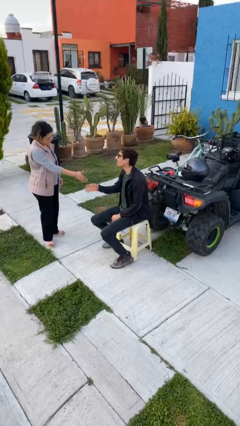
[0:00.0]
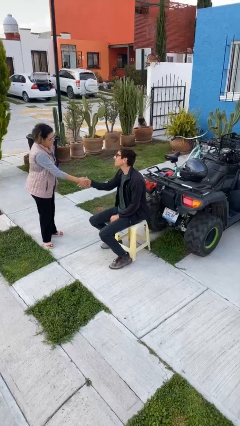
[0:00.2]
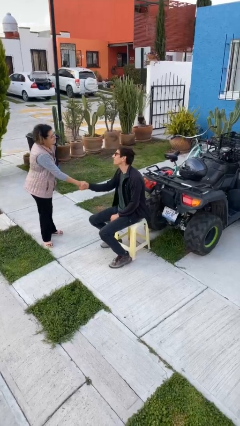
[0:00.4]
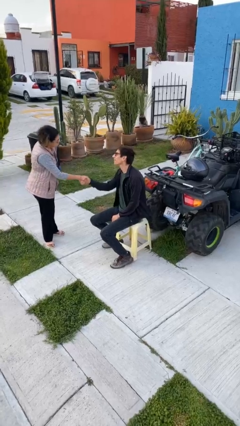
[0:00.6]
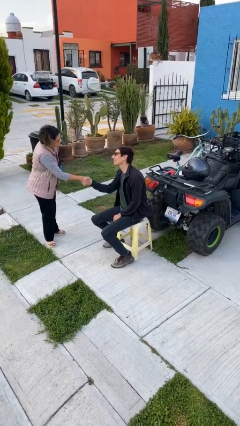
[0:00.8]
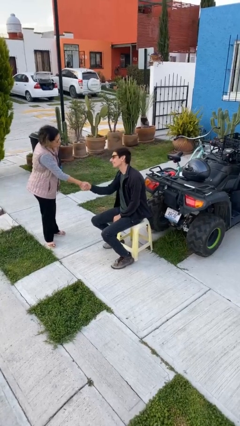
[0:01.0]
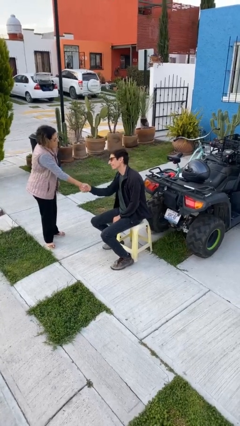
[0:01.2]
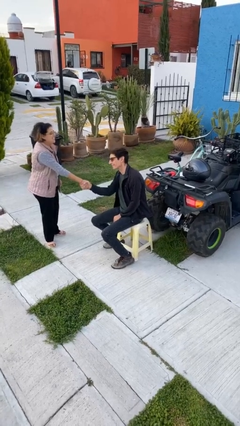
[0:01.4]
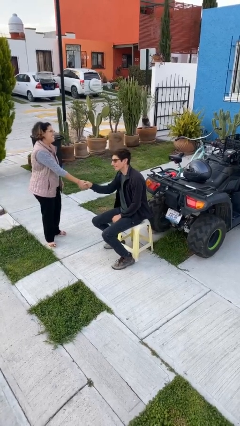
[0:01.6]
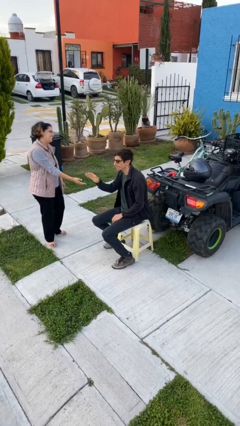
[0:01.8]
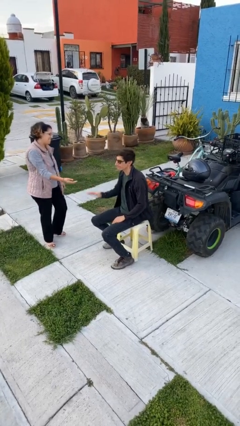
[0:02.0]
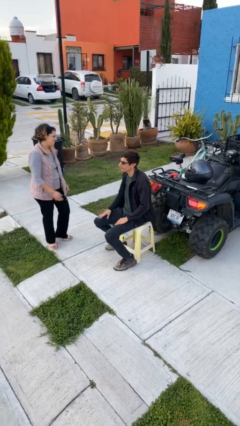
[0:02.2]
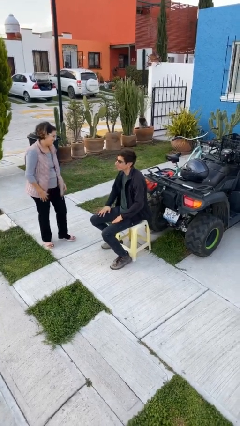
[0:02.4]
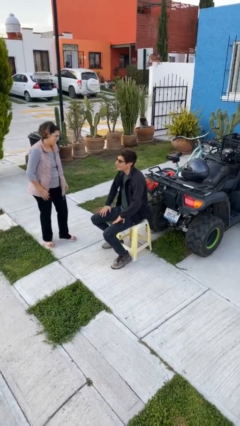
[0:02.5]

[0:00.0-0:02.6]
person shakes hand

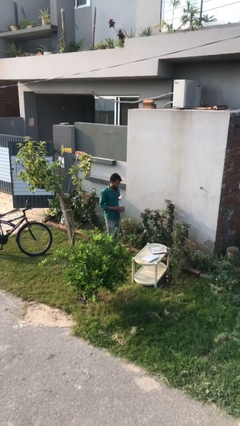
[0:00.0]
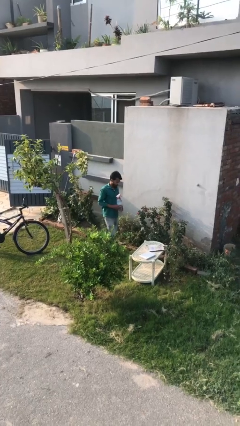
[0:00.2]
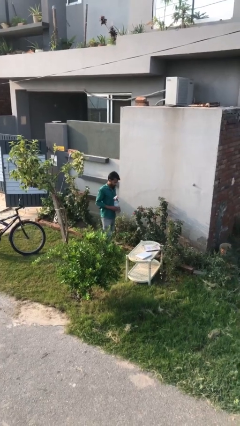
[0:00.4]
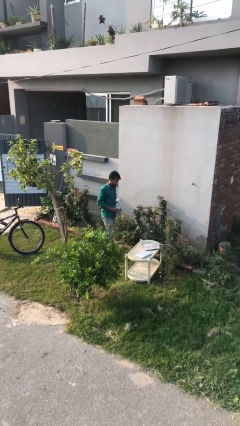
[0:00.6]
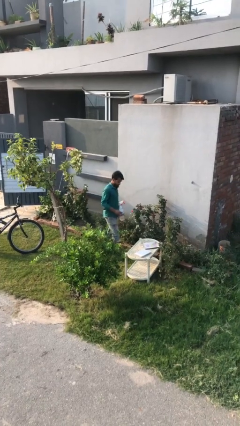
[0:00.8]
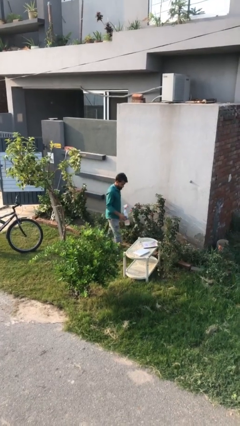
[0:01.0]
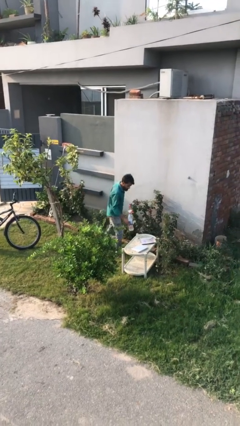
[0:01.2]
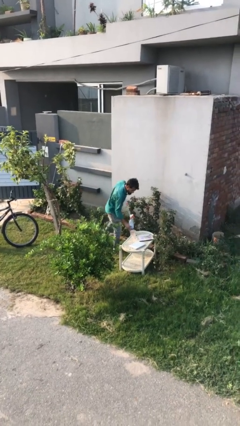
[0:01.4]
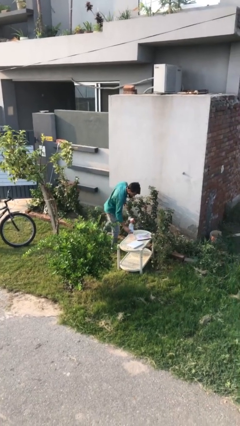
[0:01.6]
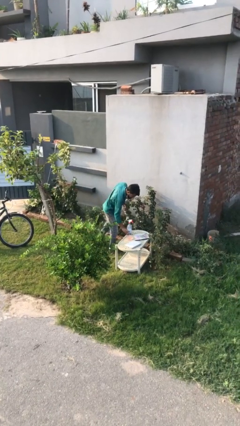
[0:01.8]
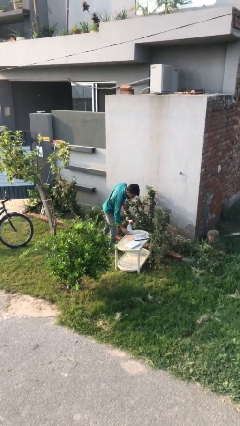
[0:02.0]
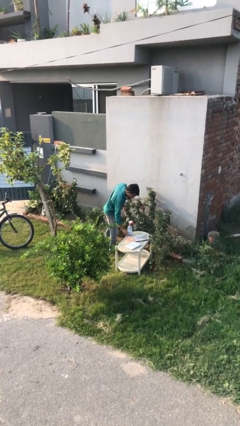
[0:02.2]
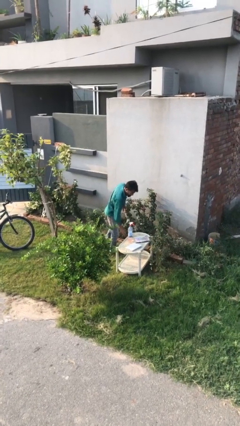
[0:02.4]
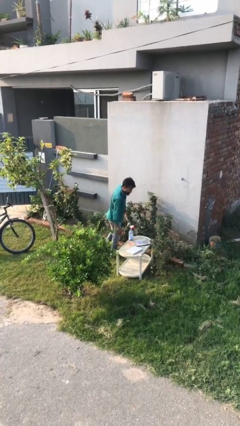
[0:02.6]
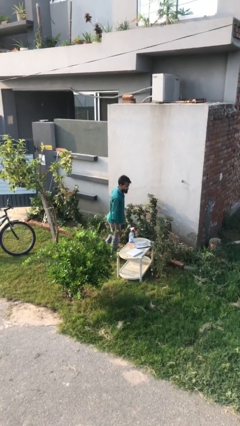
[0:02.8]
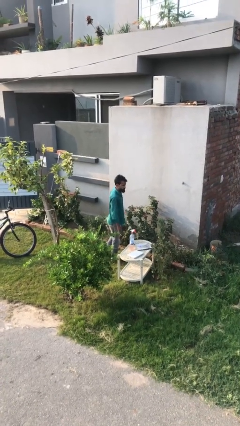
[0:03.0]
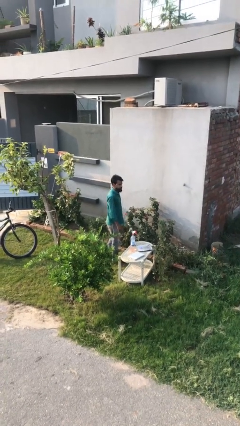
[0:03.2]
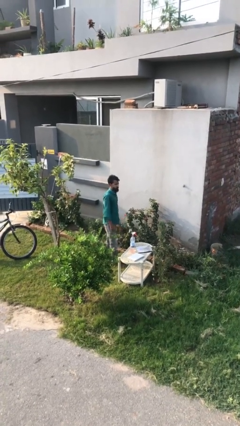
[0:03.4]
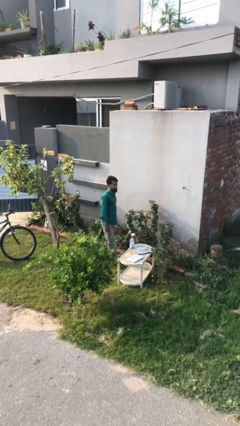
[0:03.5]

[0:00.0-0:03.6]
person puts down object on table

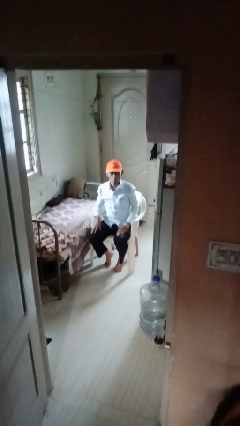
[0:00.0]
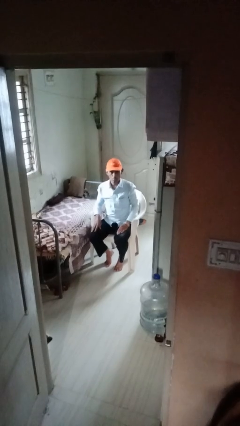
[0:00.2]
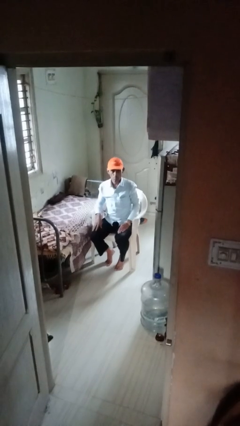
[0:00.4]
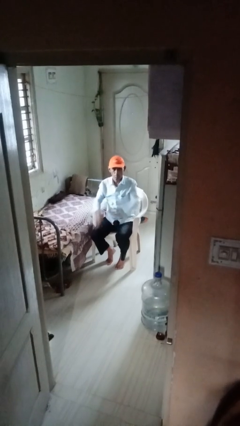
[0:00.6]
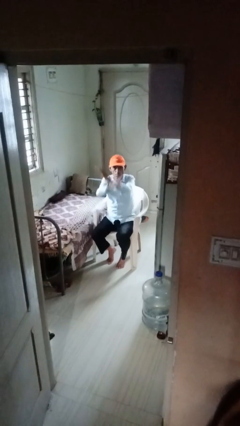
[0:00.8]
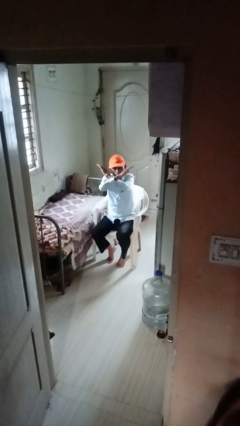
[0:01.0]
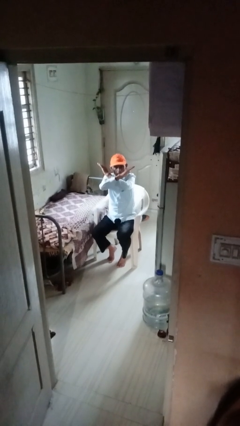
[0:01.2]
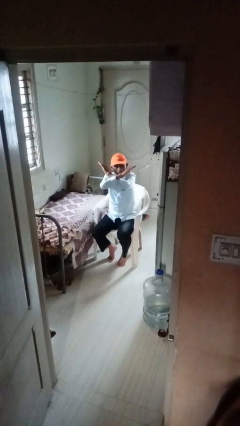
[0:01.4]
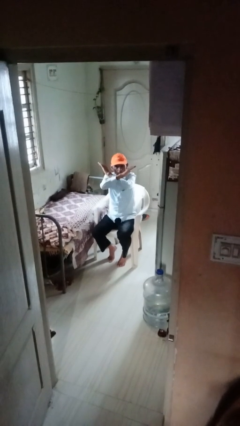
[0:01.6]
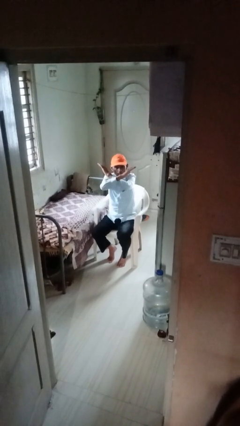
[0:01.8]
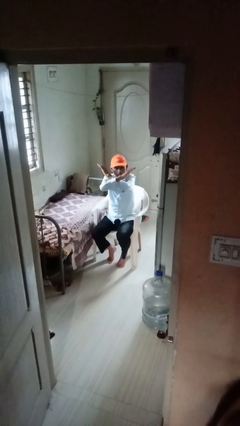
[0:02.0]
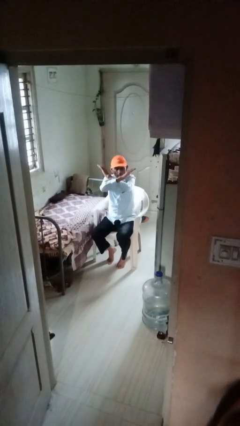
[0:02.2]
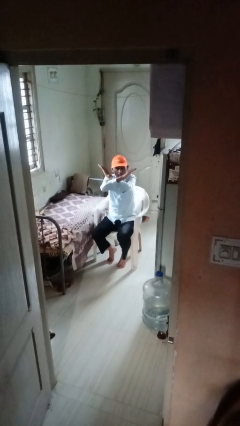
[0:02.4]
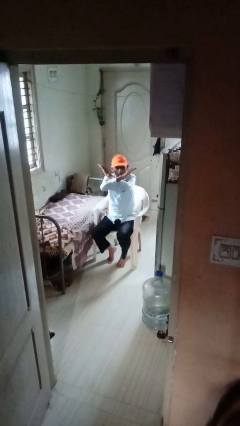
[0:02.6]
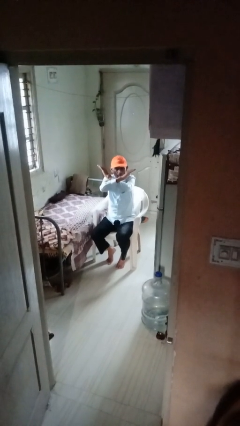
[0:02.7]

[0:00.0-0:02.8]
person gestures arms x

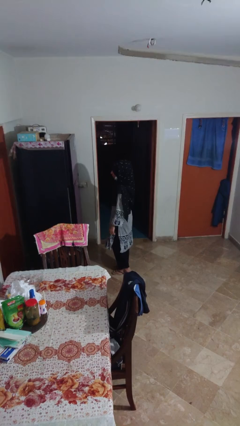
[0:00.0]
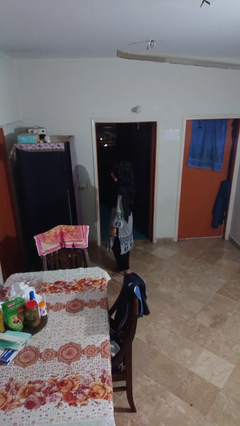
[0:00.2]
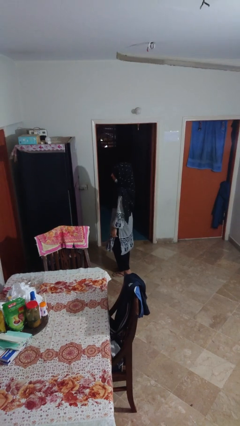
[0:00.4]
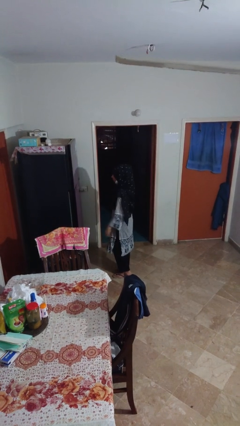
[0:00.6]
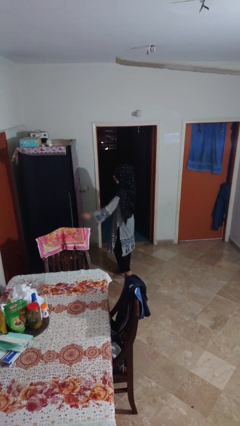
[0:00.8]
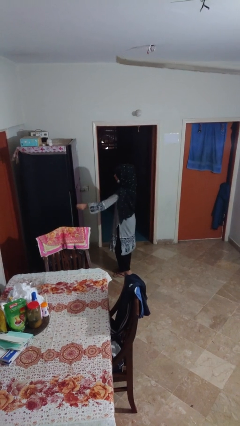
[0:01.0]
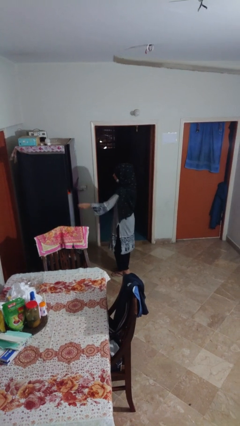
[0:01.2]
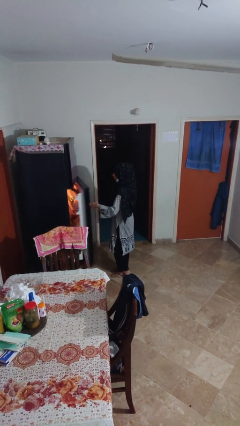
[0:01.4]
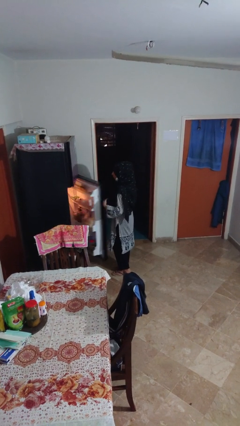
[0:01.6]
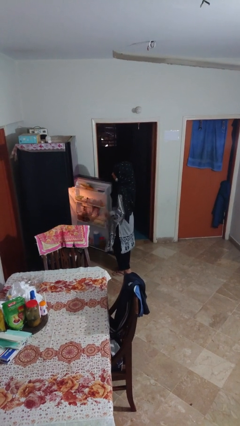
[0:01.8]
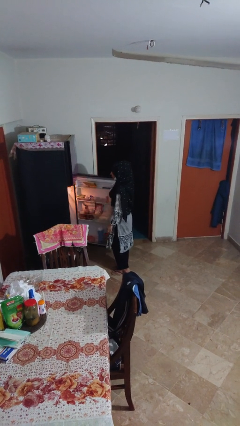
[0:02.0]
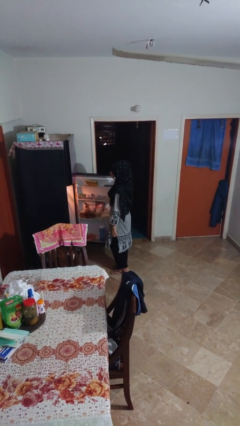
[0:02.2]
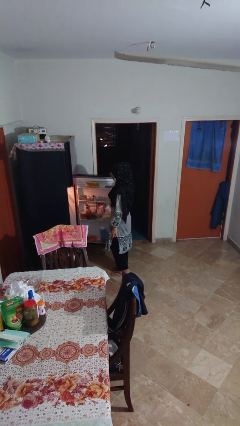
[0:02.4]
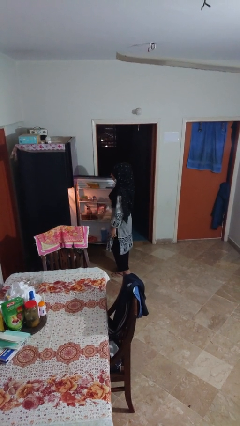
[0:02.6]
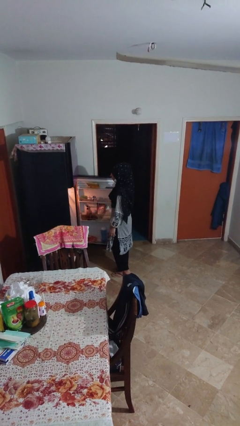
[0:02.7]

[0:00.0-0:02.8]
person opens refrigerator

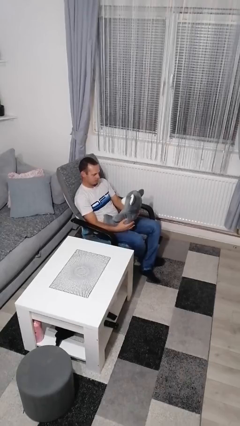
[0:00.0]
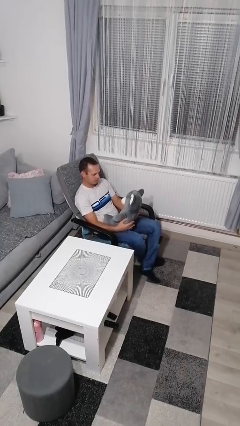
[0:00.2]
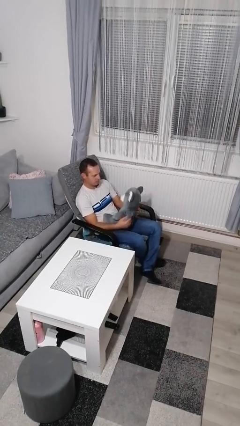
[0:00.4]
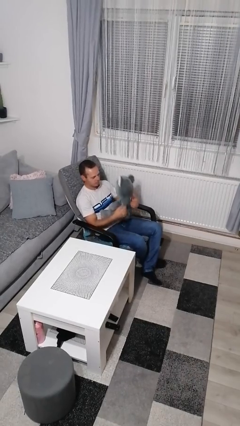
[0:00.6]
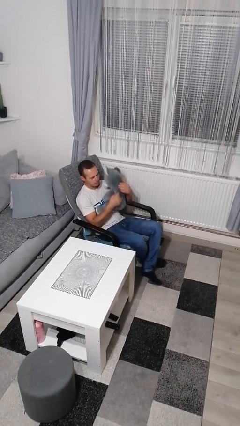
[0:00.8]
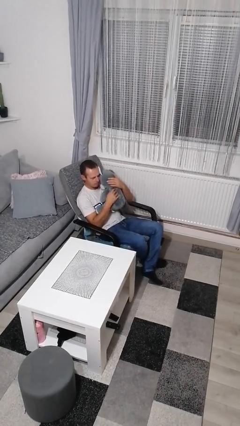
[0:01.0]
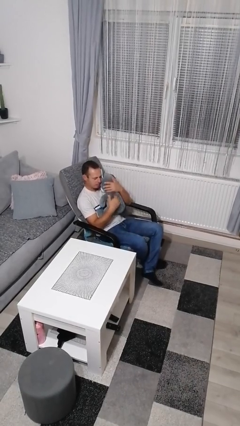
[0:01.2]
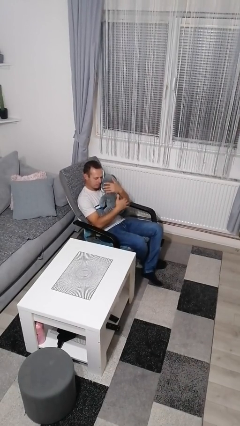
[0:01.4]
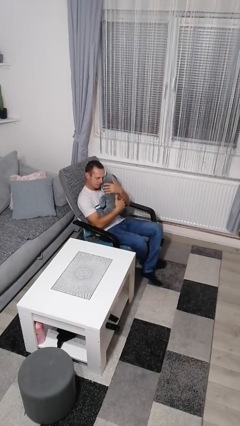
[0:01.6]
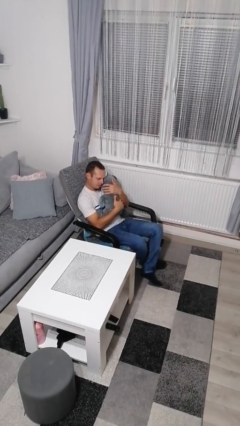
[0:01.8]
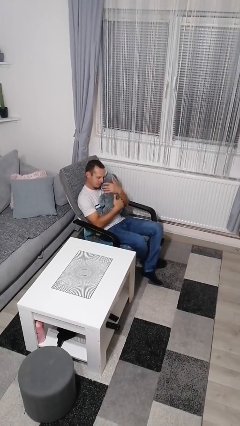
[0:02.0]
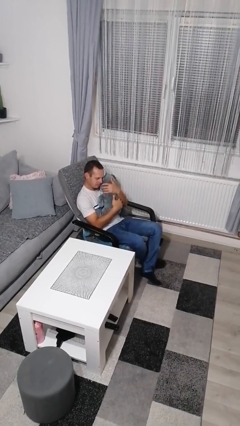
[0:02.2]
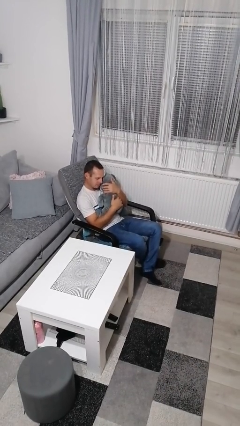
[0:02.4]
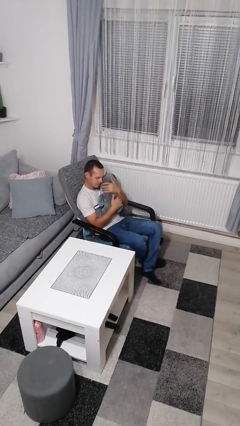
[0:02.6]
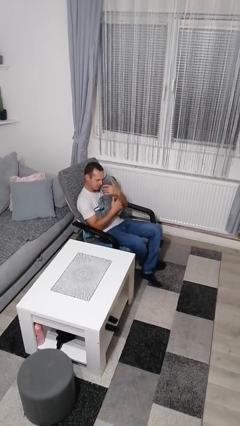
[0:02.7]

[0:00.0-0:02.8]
person hugs stuffed animal

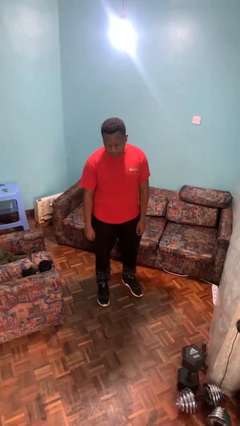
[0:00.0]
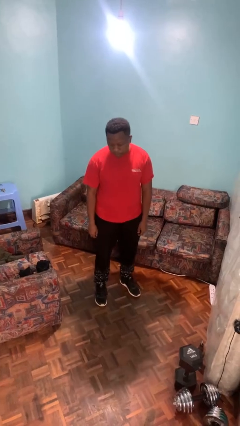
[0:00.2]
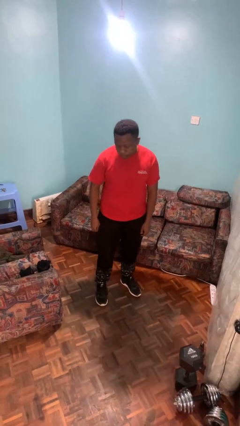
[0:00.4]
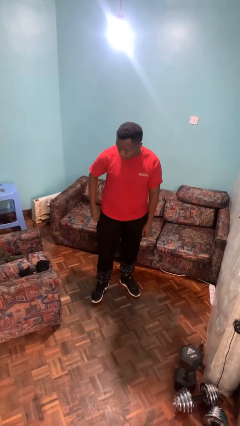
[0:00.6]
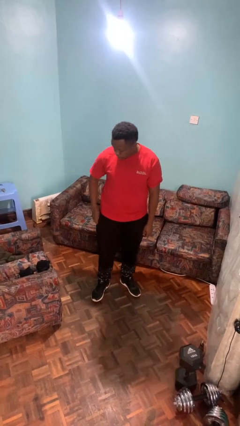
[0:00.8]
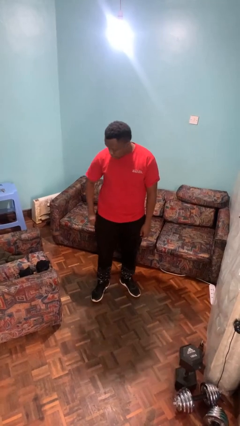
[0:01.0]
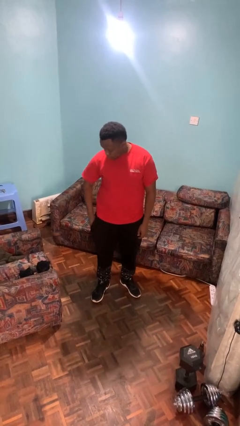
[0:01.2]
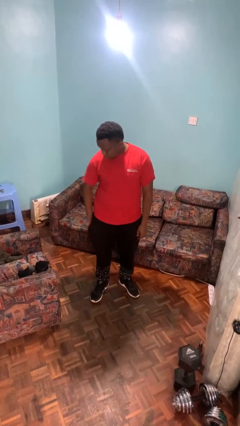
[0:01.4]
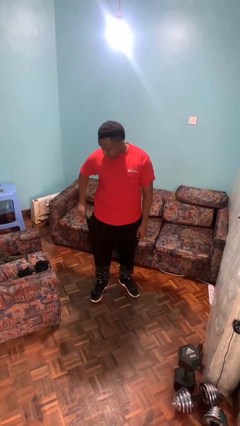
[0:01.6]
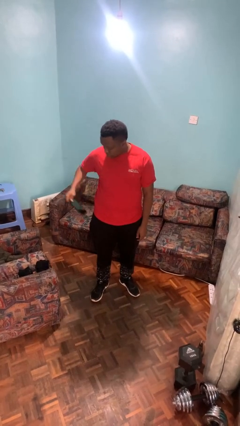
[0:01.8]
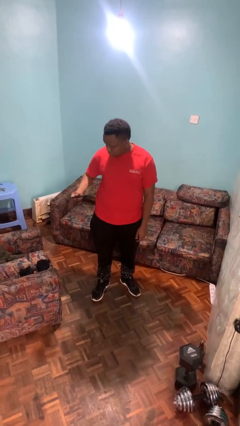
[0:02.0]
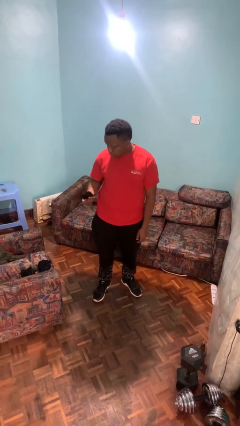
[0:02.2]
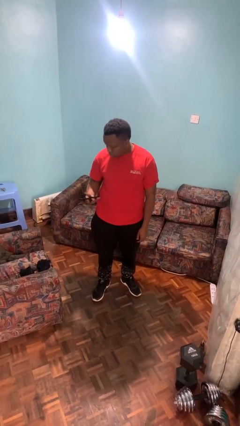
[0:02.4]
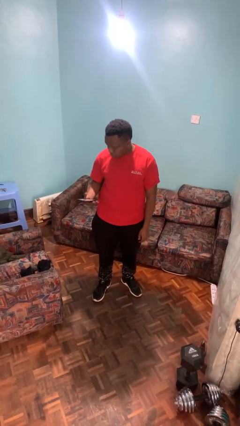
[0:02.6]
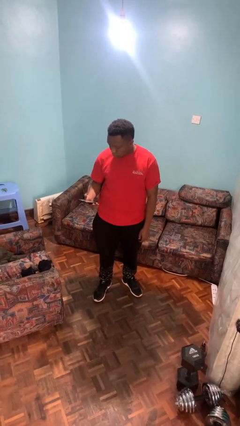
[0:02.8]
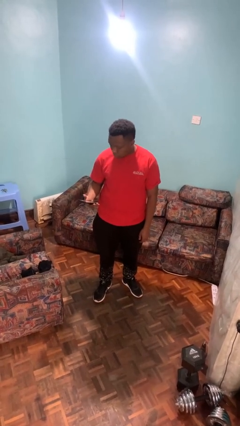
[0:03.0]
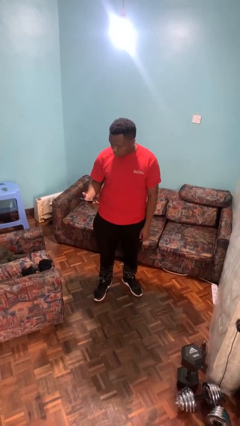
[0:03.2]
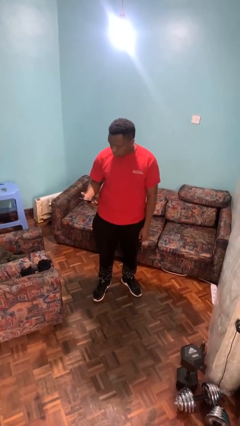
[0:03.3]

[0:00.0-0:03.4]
person takes phone from pocket
